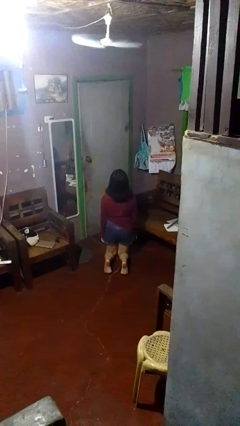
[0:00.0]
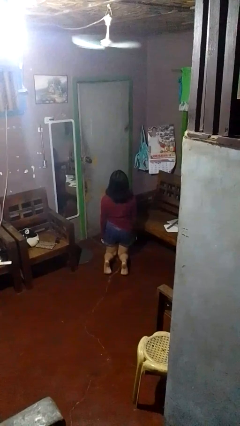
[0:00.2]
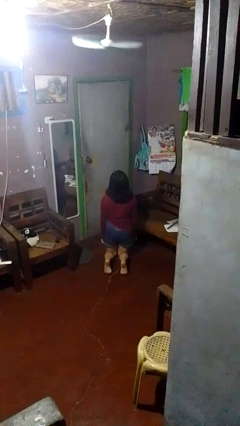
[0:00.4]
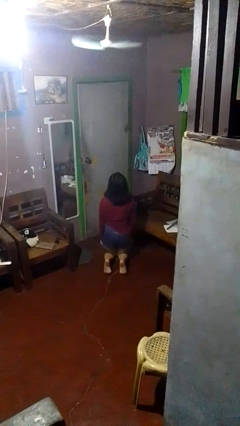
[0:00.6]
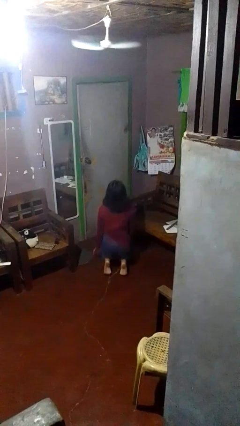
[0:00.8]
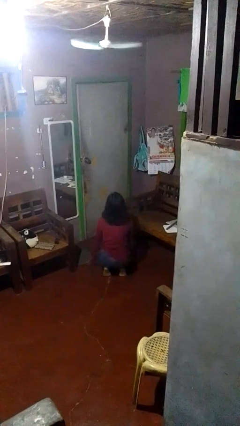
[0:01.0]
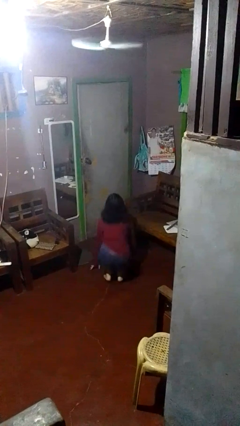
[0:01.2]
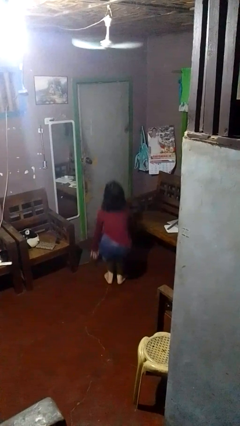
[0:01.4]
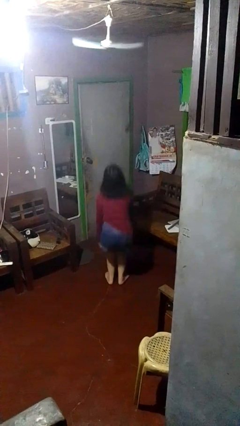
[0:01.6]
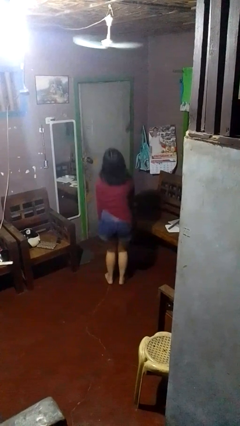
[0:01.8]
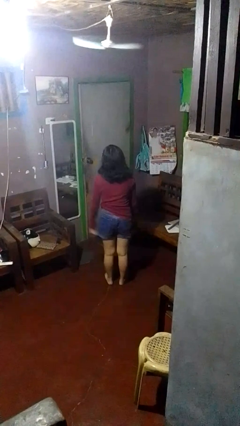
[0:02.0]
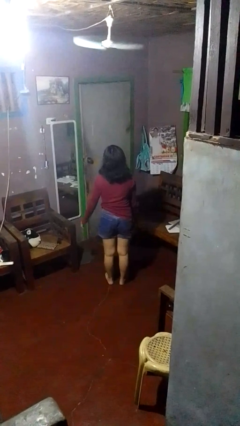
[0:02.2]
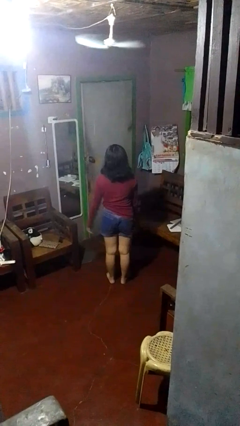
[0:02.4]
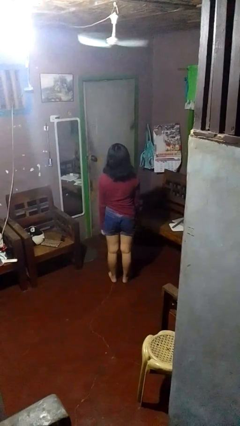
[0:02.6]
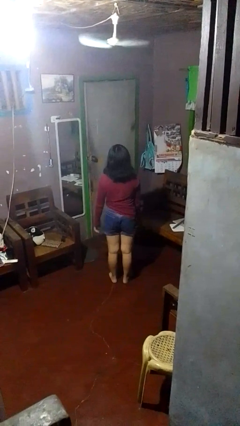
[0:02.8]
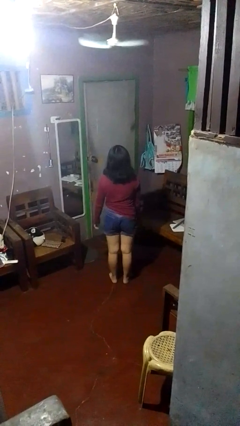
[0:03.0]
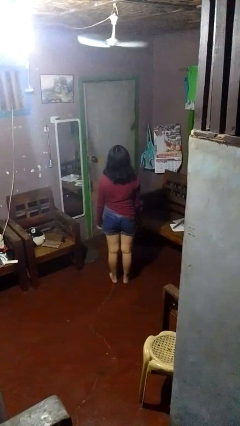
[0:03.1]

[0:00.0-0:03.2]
person stands up from floor

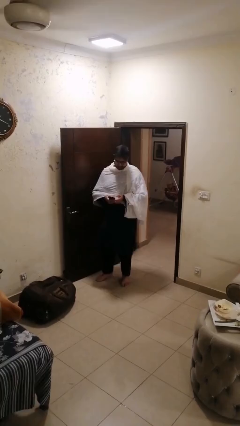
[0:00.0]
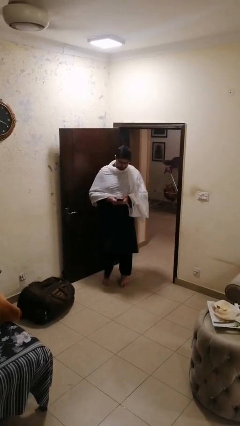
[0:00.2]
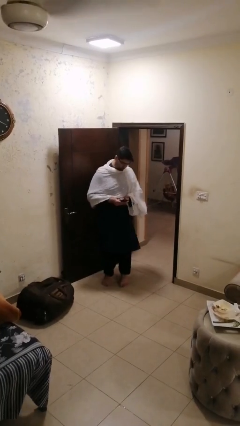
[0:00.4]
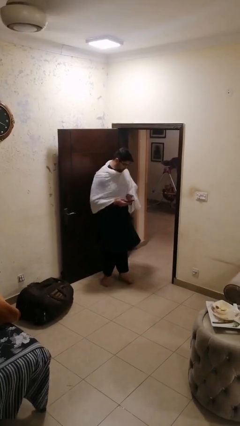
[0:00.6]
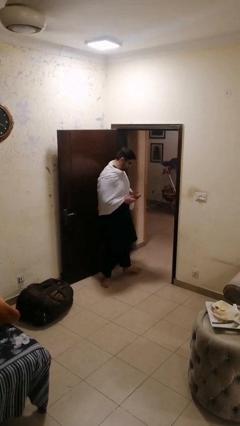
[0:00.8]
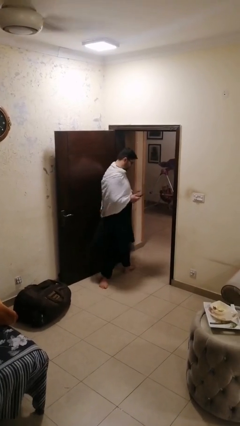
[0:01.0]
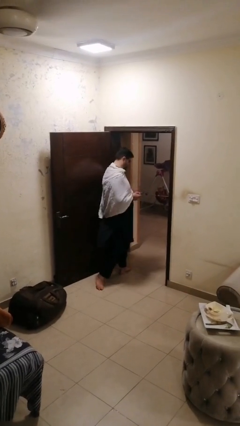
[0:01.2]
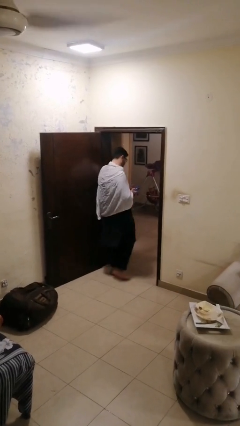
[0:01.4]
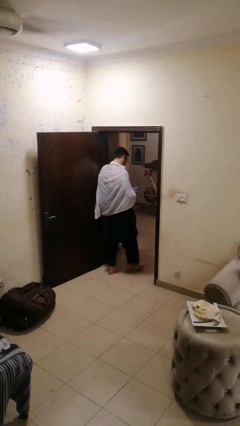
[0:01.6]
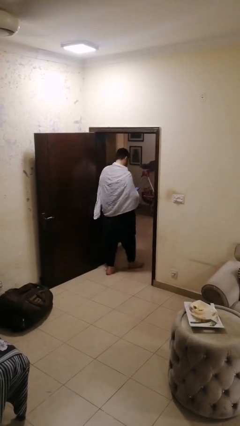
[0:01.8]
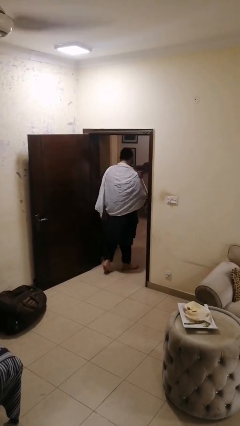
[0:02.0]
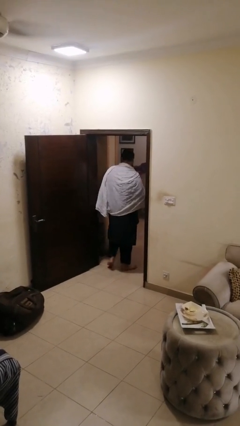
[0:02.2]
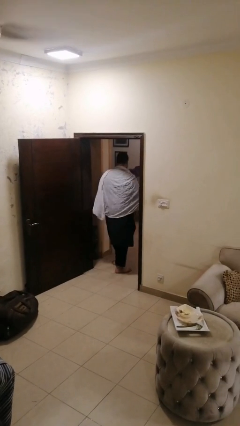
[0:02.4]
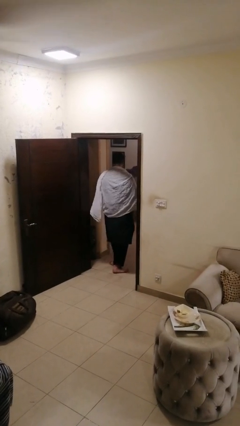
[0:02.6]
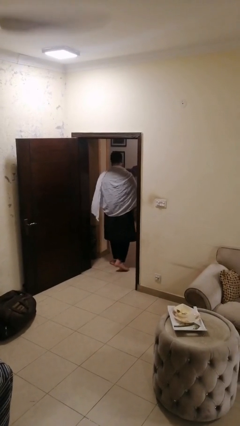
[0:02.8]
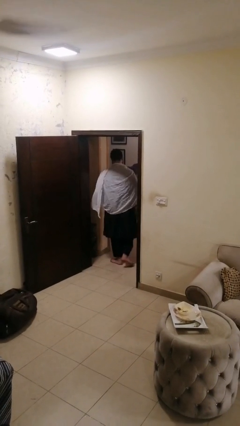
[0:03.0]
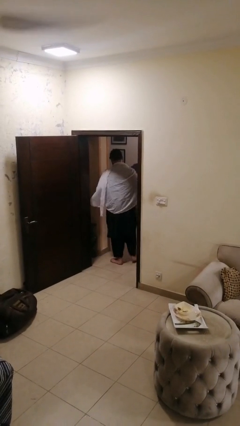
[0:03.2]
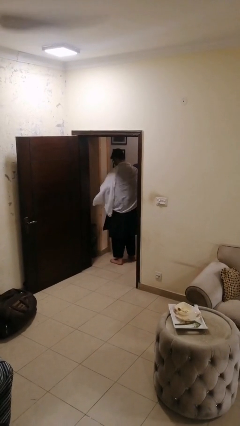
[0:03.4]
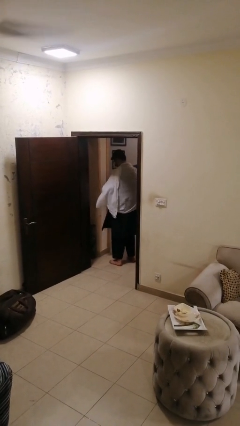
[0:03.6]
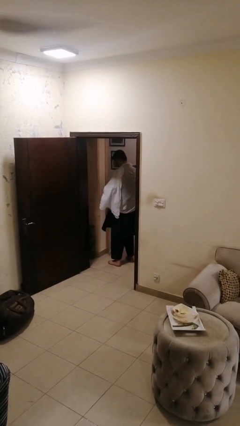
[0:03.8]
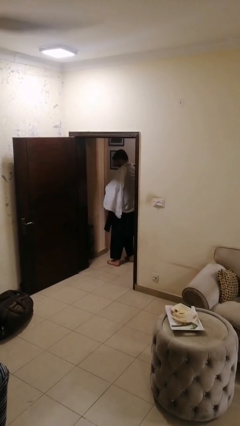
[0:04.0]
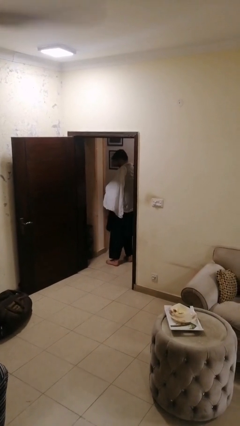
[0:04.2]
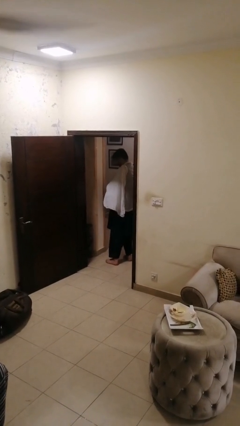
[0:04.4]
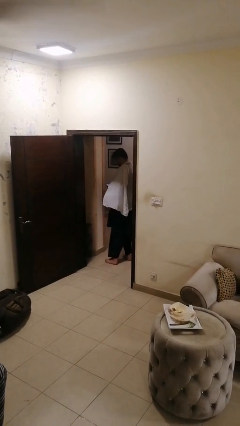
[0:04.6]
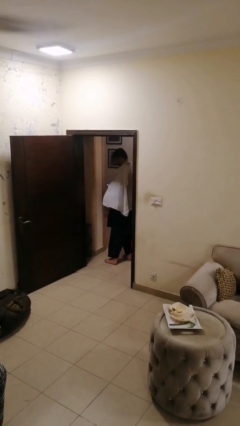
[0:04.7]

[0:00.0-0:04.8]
person exits scene through structure

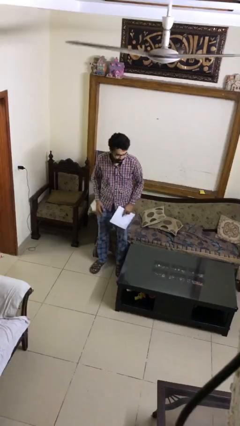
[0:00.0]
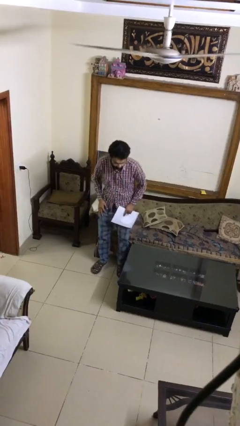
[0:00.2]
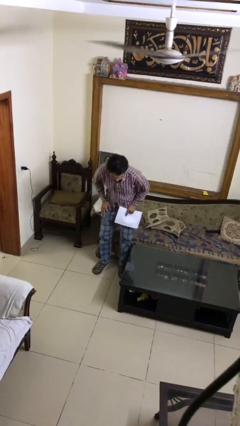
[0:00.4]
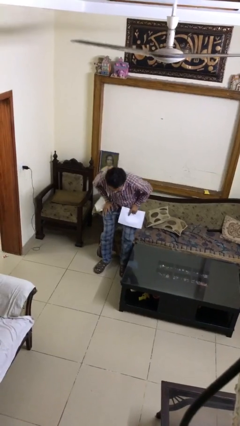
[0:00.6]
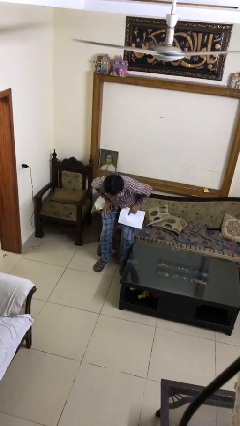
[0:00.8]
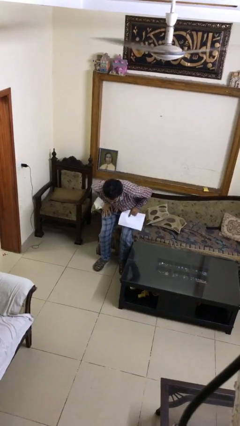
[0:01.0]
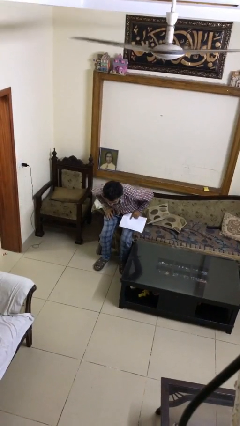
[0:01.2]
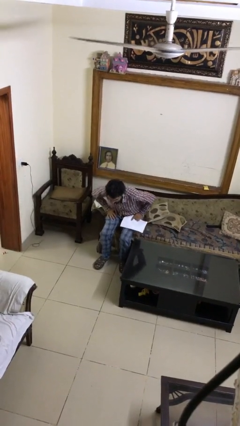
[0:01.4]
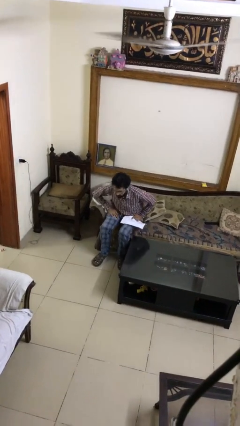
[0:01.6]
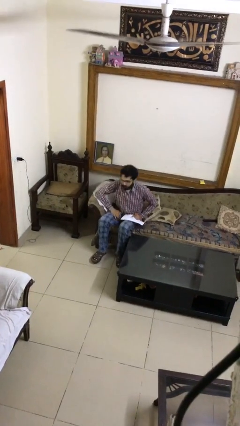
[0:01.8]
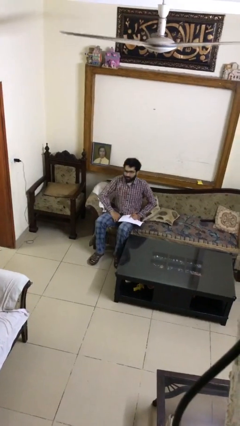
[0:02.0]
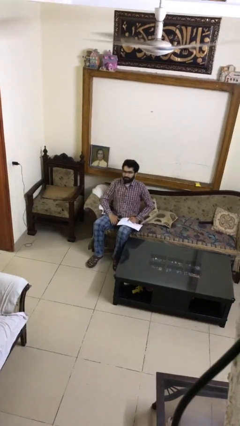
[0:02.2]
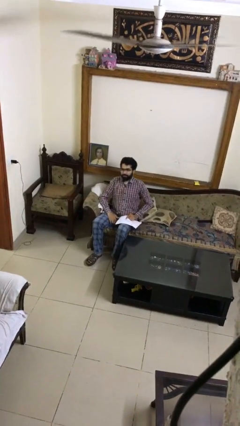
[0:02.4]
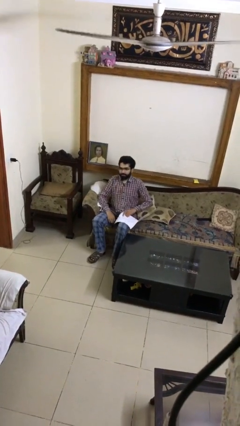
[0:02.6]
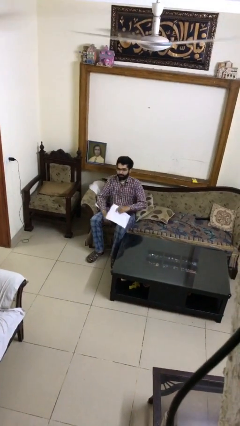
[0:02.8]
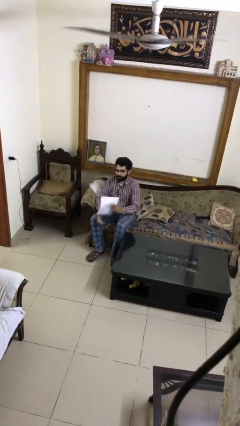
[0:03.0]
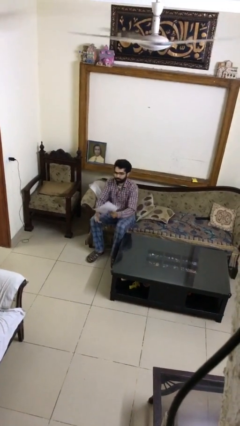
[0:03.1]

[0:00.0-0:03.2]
person sits down

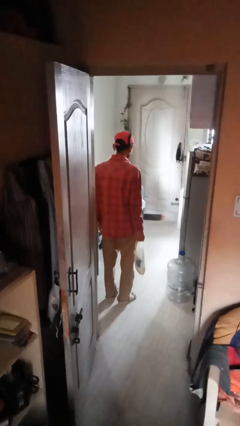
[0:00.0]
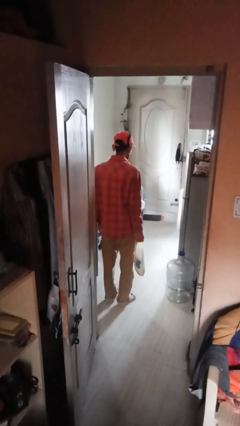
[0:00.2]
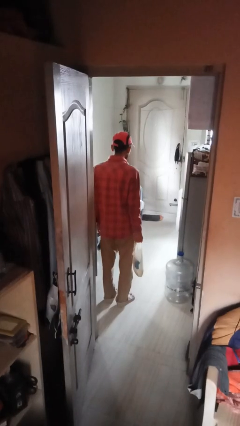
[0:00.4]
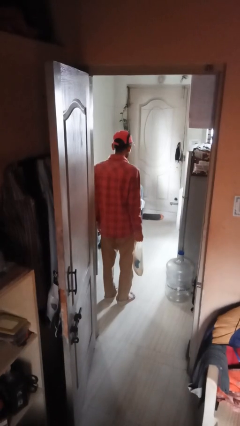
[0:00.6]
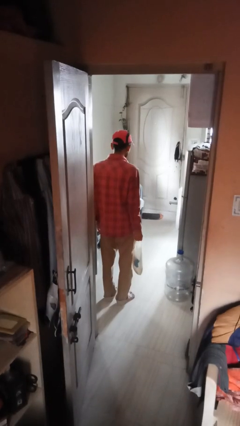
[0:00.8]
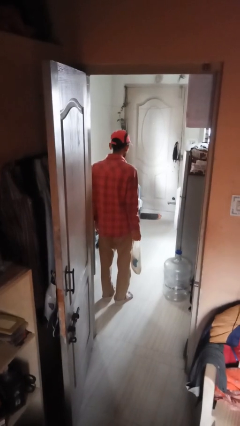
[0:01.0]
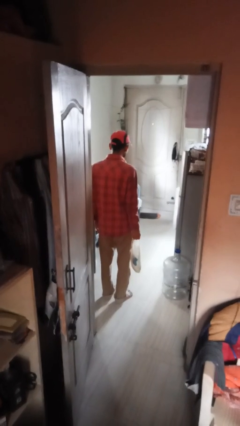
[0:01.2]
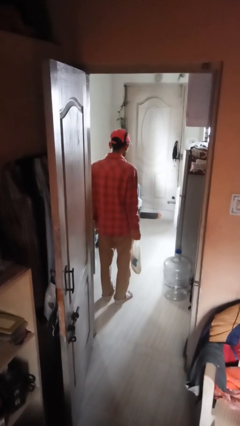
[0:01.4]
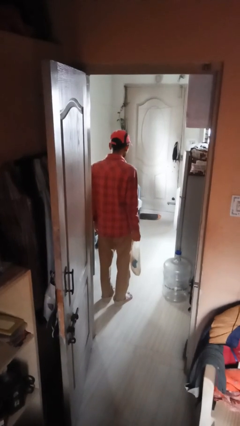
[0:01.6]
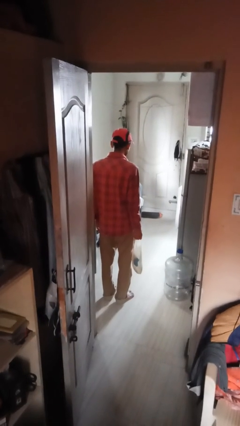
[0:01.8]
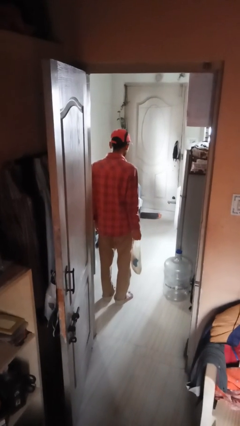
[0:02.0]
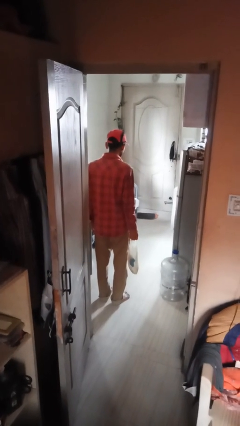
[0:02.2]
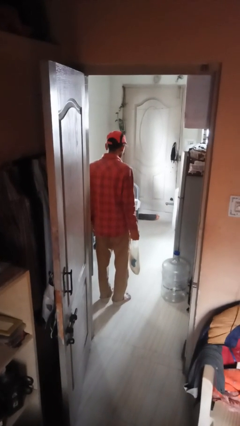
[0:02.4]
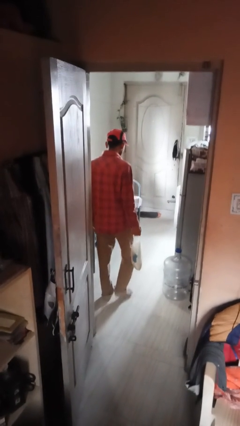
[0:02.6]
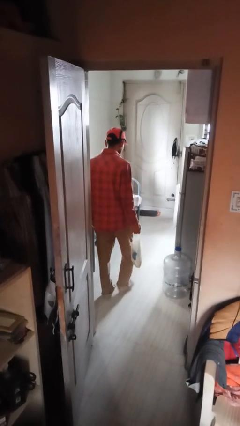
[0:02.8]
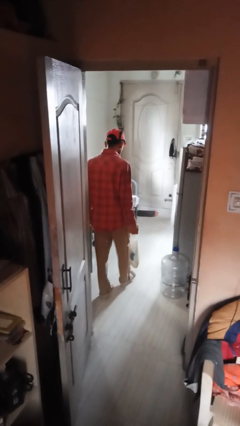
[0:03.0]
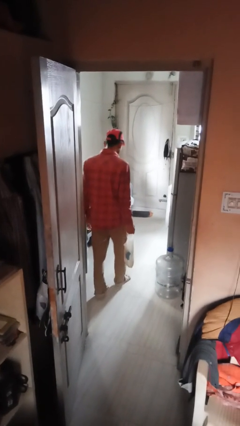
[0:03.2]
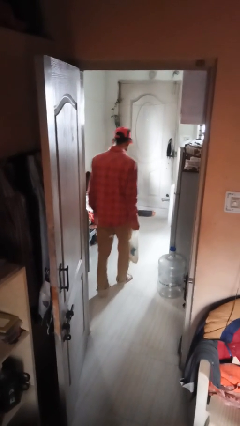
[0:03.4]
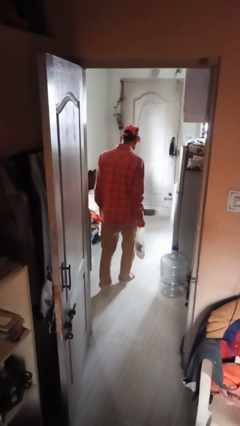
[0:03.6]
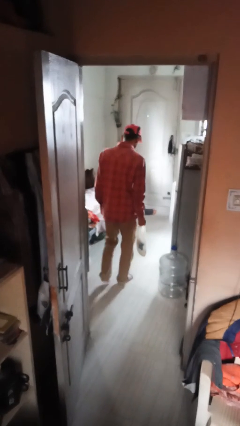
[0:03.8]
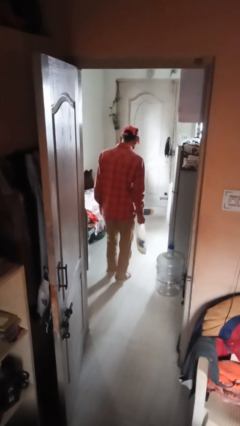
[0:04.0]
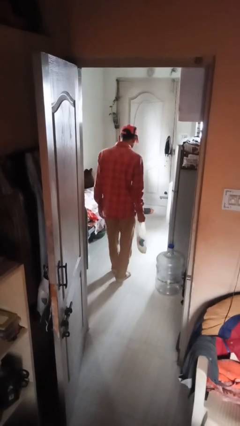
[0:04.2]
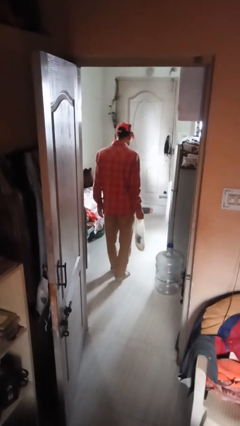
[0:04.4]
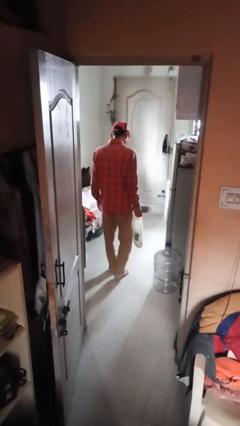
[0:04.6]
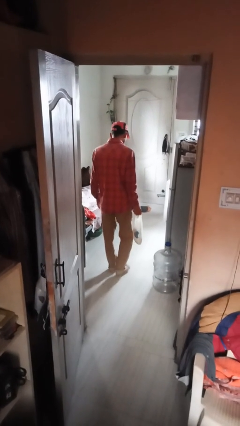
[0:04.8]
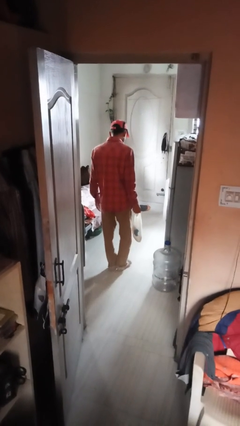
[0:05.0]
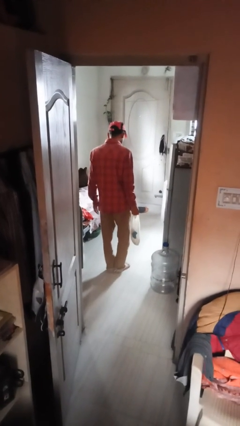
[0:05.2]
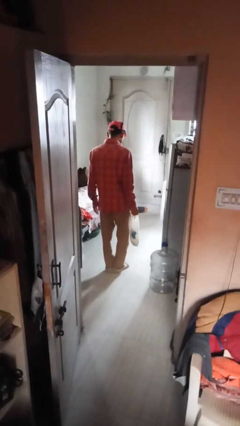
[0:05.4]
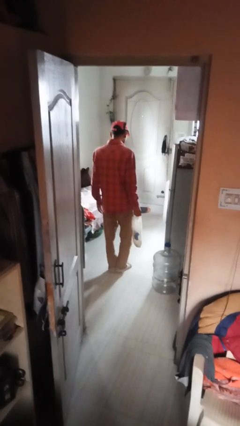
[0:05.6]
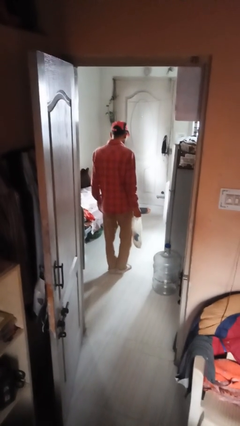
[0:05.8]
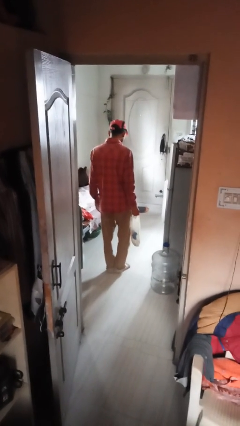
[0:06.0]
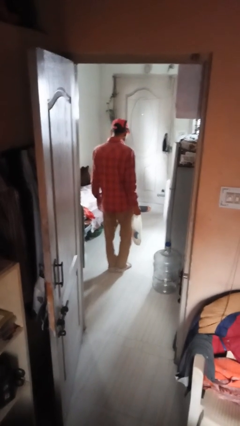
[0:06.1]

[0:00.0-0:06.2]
person carries groceries

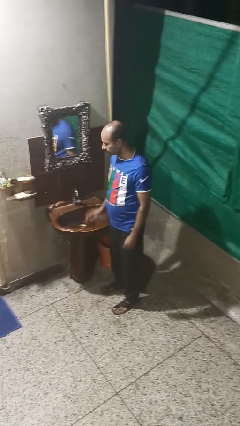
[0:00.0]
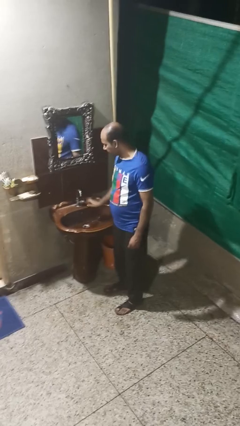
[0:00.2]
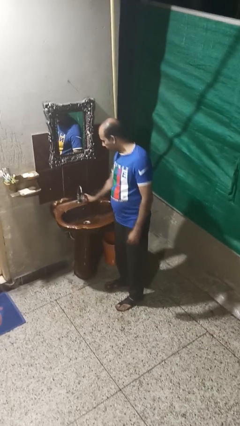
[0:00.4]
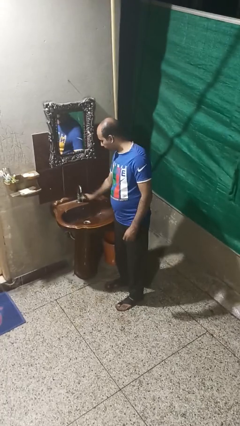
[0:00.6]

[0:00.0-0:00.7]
person turns off faucet
